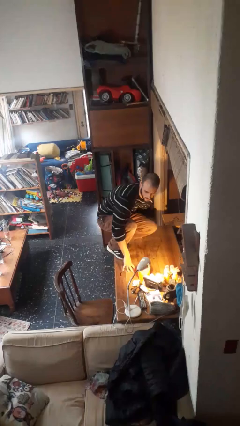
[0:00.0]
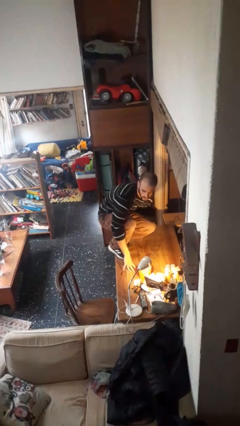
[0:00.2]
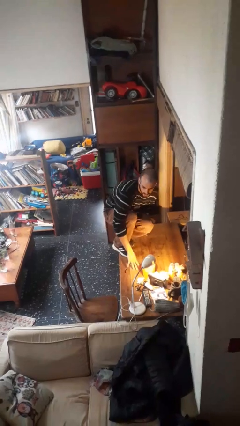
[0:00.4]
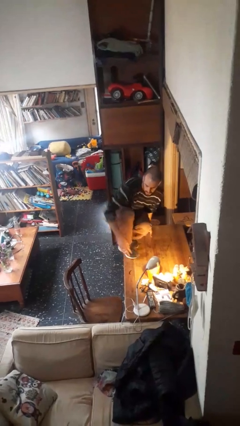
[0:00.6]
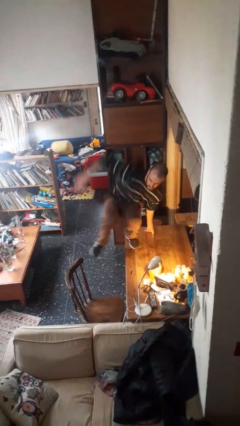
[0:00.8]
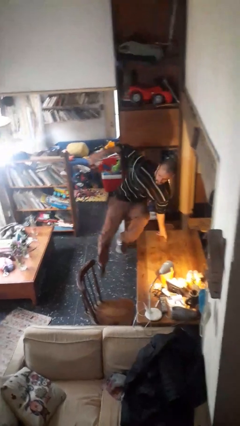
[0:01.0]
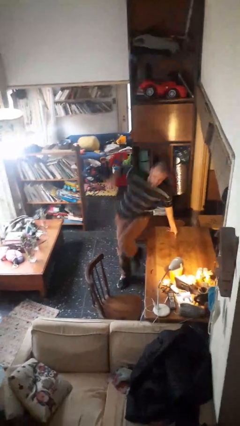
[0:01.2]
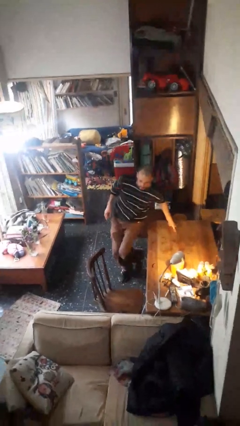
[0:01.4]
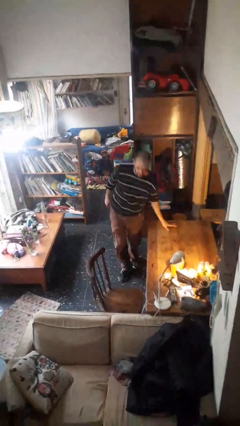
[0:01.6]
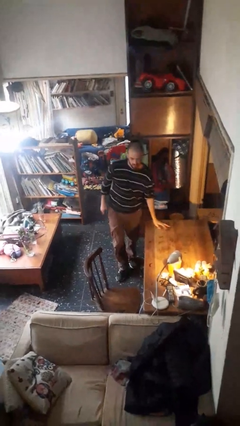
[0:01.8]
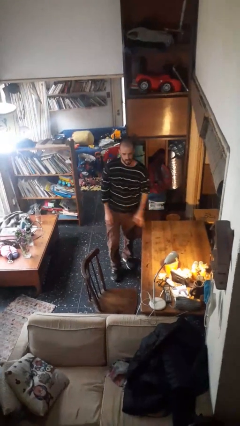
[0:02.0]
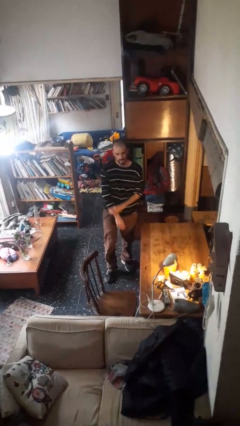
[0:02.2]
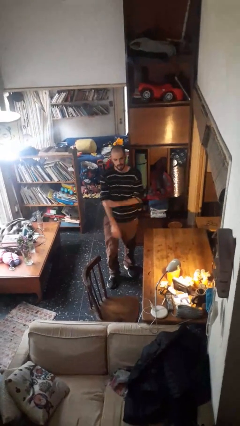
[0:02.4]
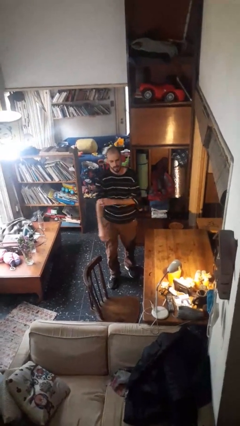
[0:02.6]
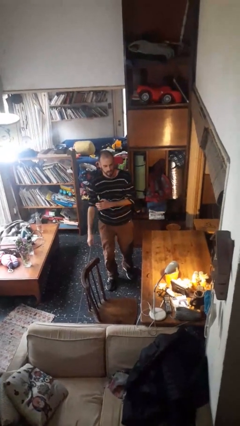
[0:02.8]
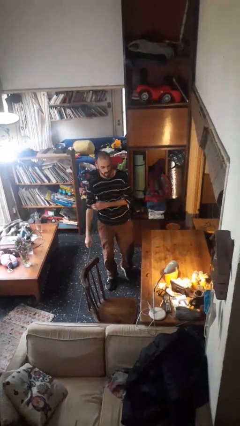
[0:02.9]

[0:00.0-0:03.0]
person climbs off table

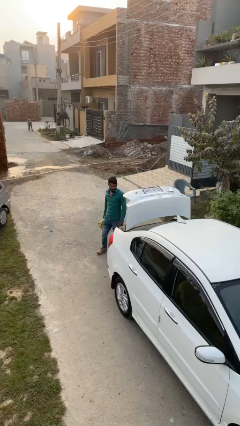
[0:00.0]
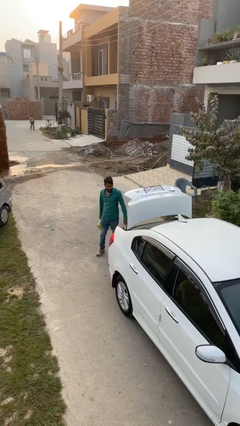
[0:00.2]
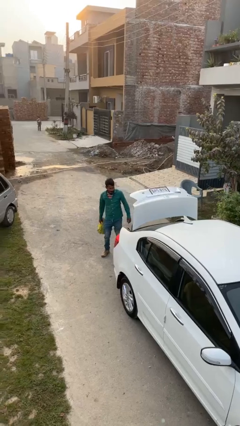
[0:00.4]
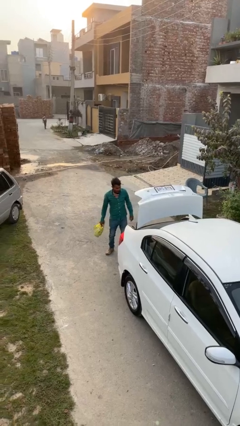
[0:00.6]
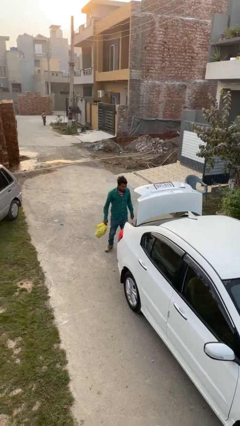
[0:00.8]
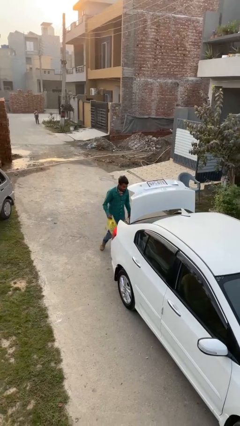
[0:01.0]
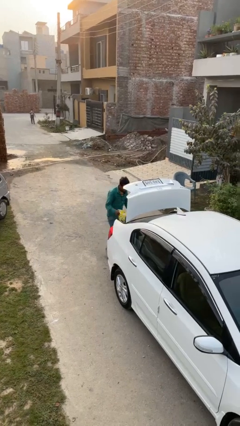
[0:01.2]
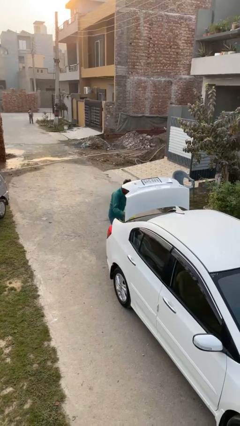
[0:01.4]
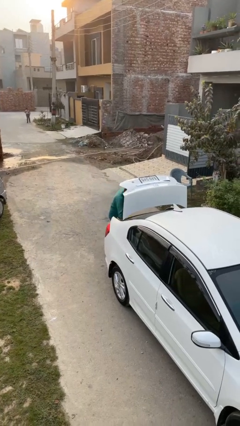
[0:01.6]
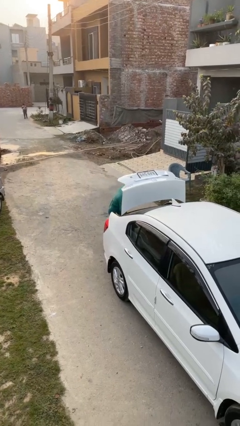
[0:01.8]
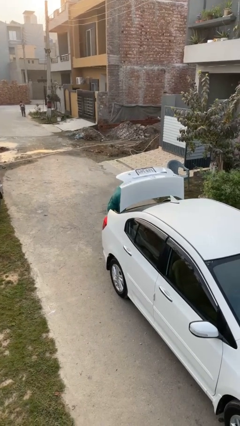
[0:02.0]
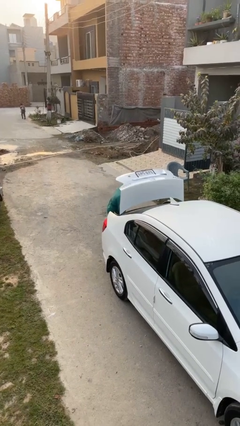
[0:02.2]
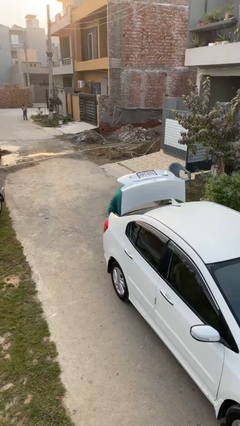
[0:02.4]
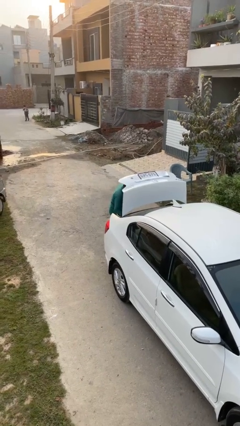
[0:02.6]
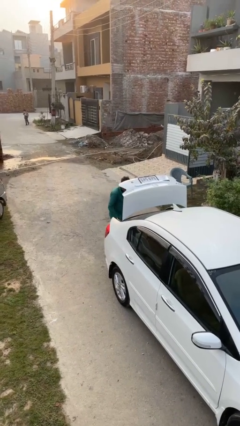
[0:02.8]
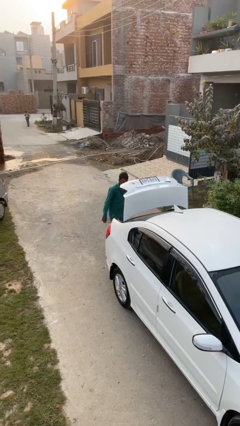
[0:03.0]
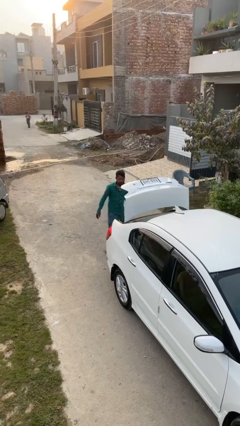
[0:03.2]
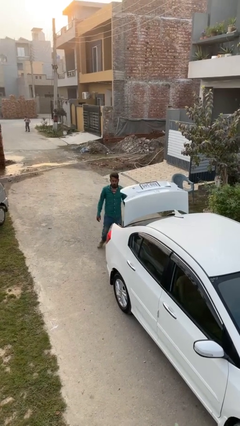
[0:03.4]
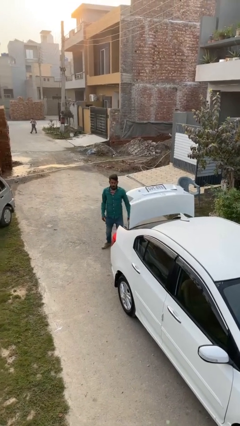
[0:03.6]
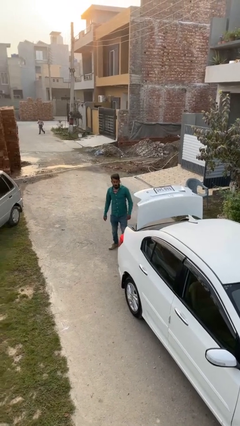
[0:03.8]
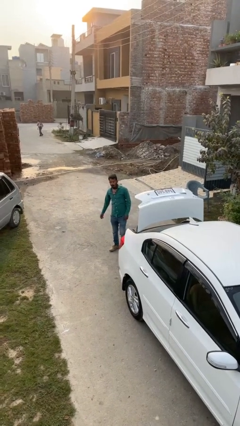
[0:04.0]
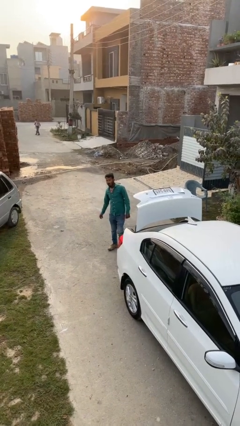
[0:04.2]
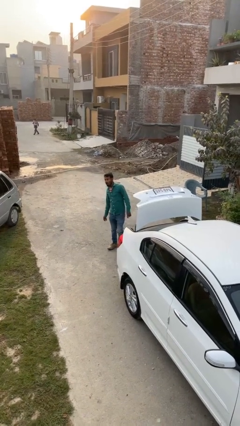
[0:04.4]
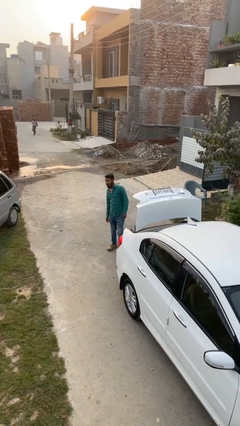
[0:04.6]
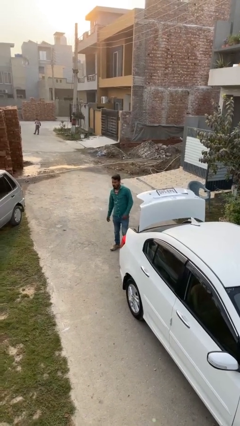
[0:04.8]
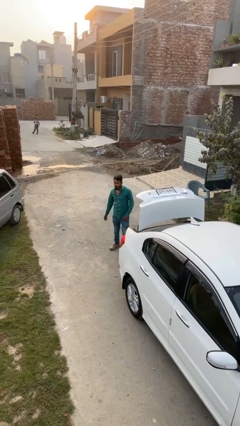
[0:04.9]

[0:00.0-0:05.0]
person loads car

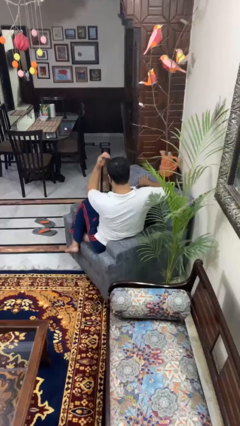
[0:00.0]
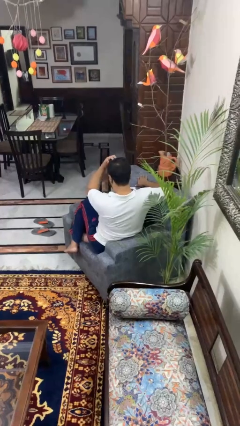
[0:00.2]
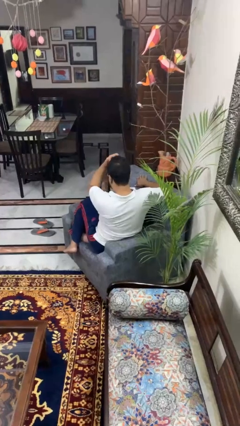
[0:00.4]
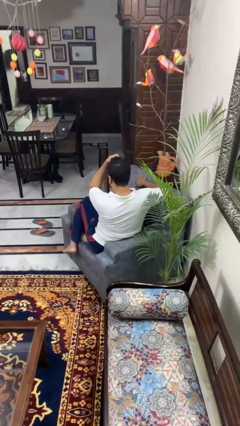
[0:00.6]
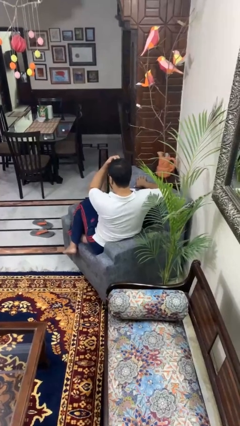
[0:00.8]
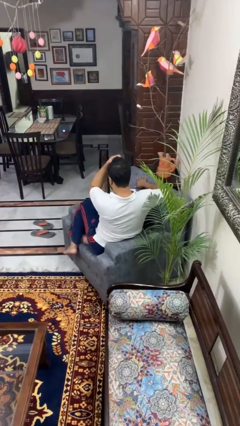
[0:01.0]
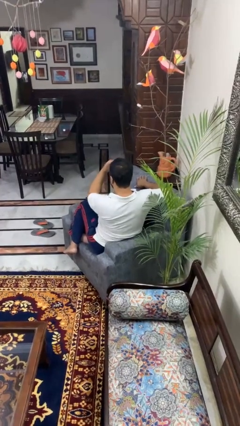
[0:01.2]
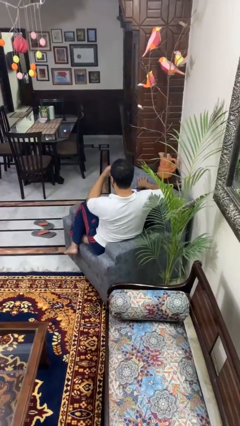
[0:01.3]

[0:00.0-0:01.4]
person scratches face

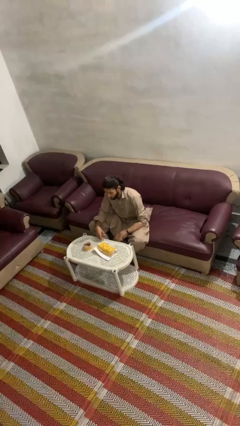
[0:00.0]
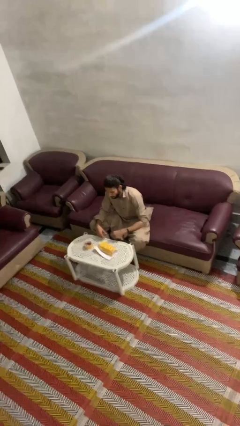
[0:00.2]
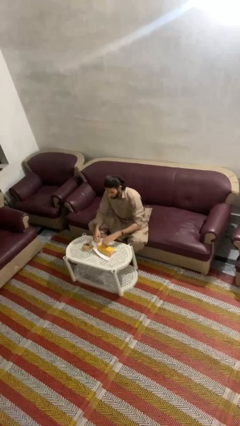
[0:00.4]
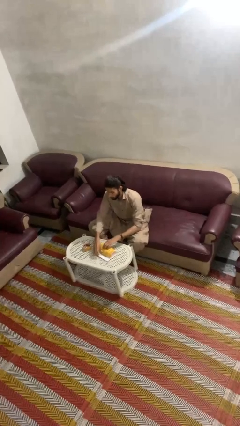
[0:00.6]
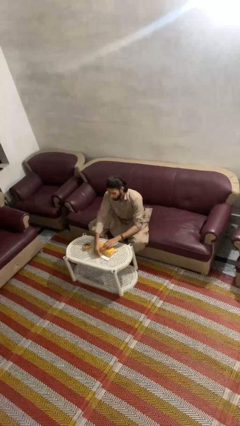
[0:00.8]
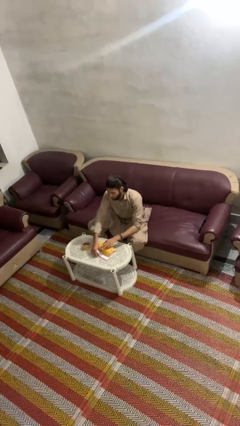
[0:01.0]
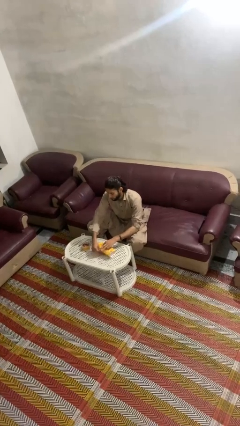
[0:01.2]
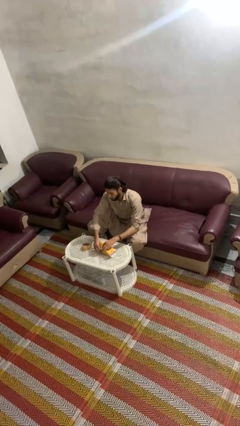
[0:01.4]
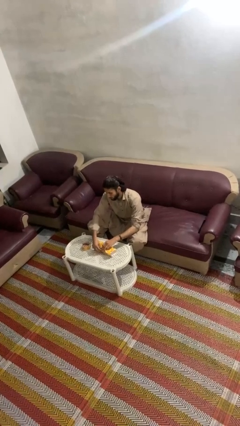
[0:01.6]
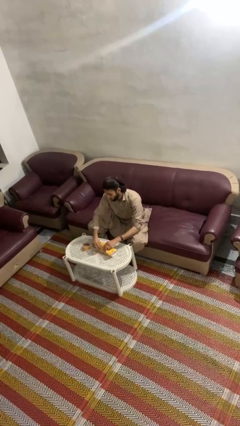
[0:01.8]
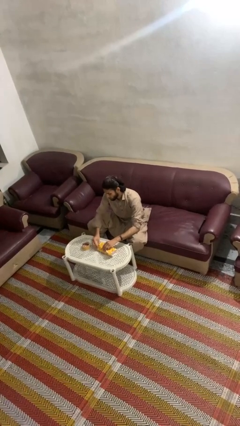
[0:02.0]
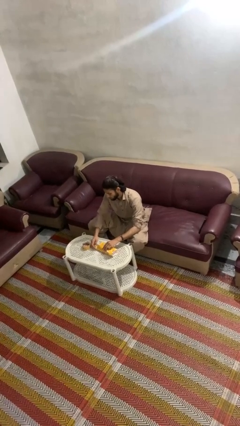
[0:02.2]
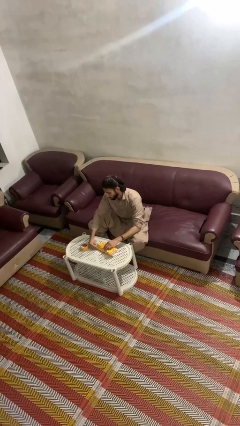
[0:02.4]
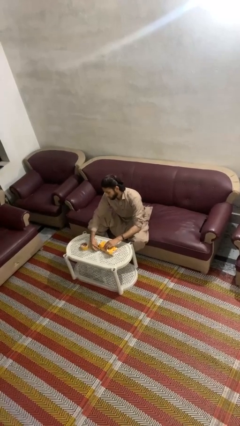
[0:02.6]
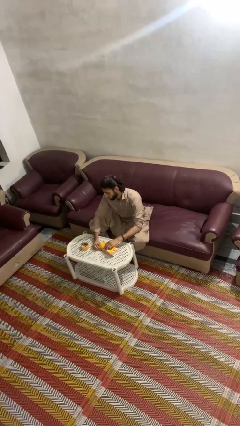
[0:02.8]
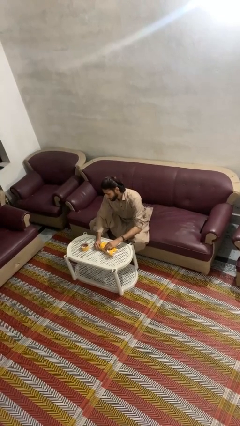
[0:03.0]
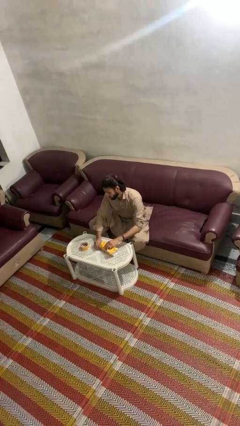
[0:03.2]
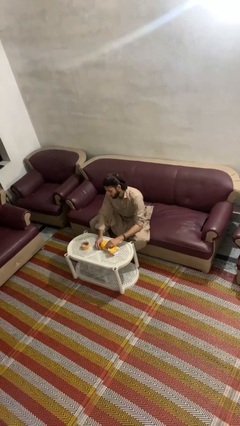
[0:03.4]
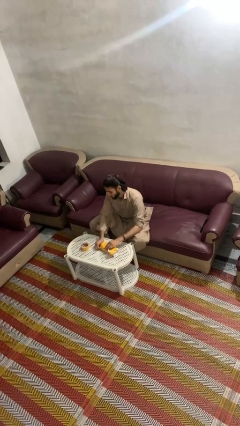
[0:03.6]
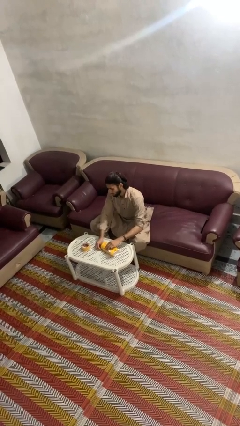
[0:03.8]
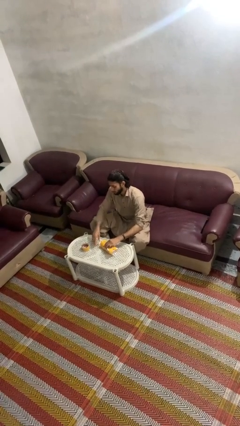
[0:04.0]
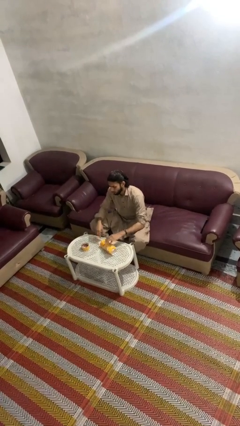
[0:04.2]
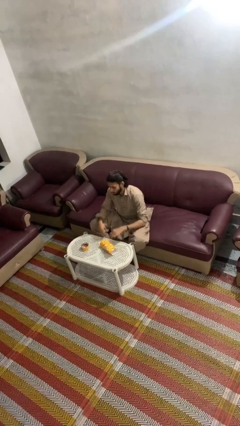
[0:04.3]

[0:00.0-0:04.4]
person wraps box

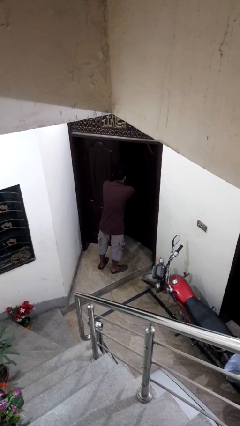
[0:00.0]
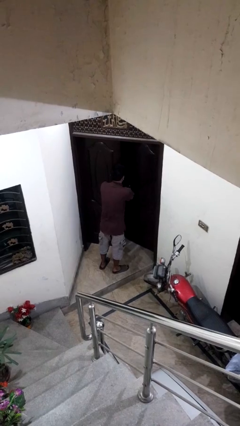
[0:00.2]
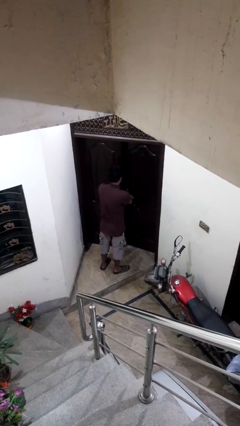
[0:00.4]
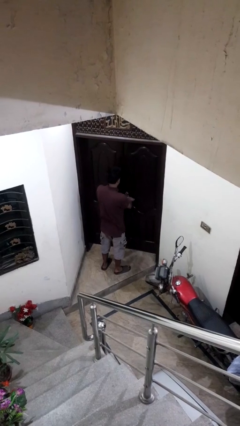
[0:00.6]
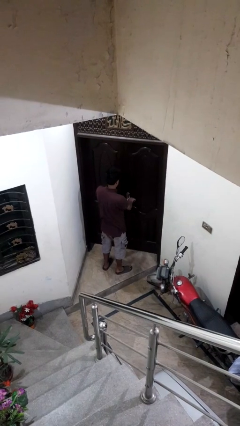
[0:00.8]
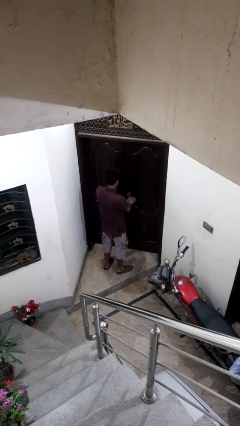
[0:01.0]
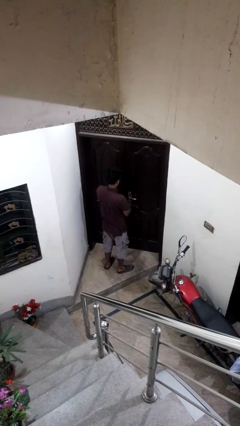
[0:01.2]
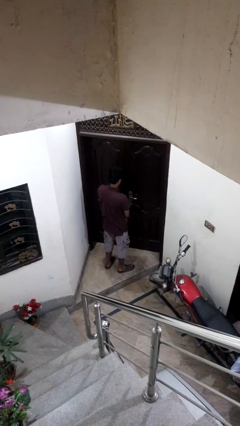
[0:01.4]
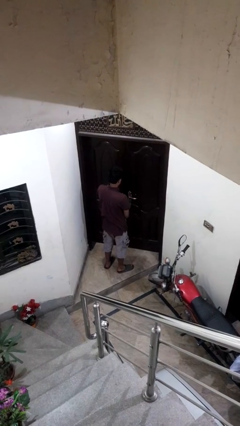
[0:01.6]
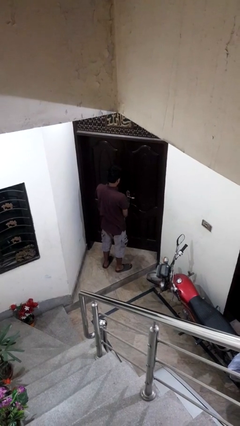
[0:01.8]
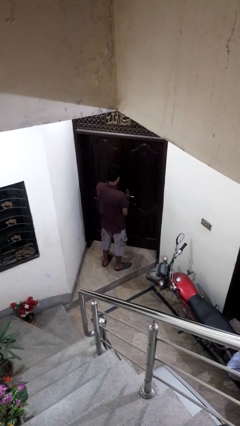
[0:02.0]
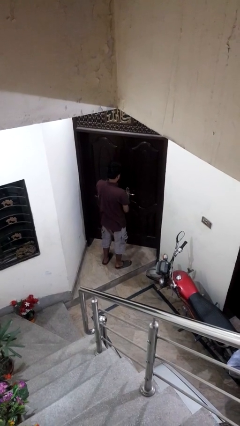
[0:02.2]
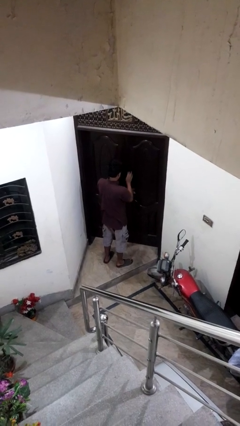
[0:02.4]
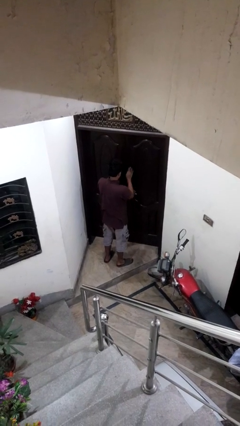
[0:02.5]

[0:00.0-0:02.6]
person closes facility door

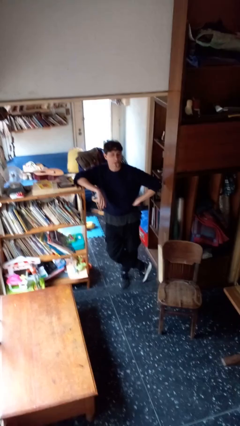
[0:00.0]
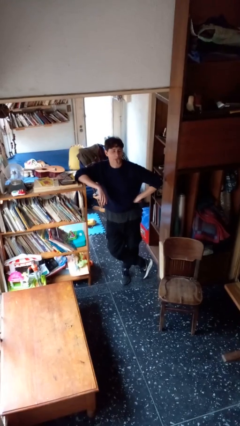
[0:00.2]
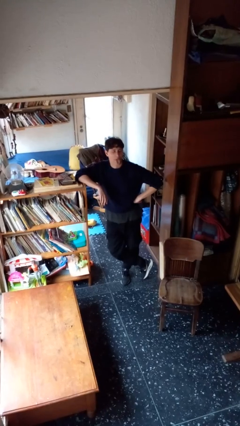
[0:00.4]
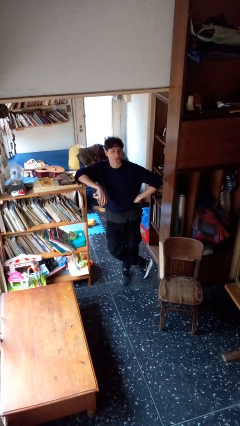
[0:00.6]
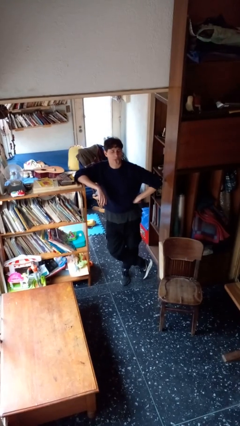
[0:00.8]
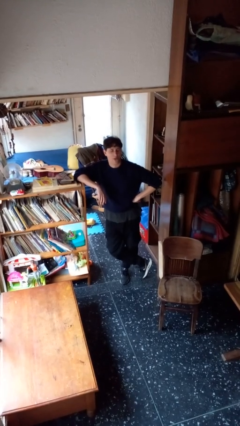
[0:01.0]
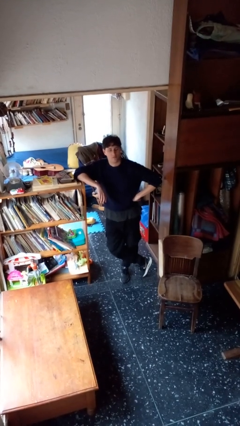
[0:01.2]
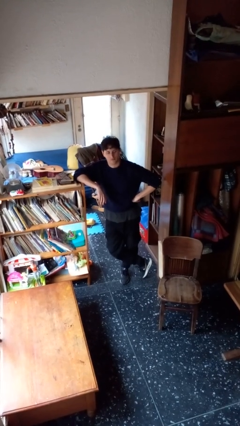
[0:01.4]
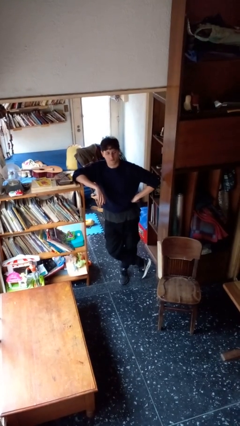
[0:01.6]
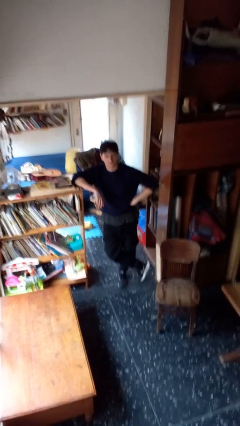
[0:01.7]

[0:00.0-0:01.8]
person sticks out tongue
